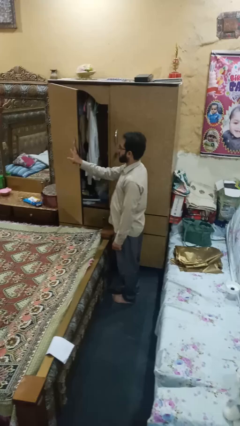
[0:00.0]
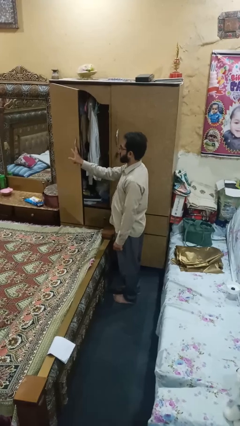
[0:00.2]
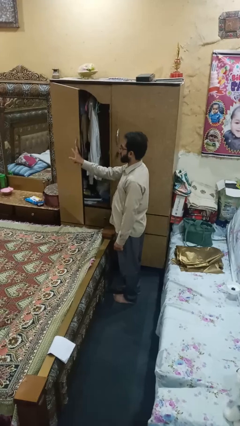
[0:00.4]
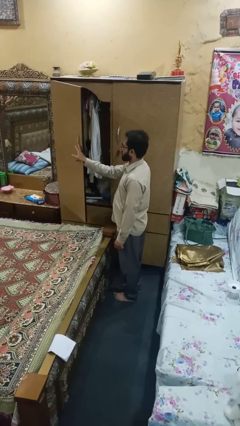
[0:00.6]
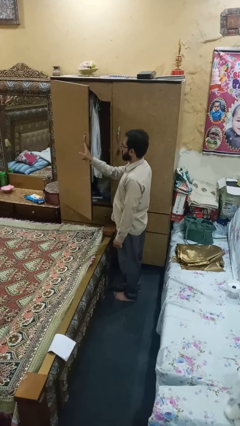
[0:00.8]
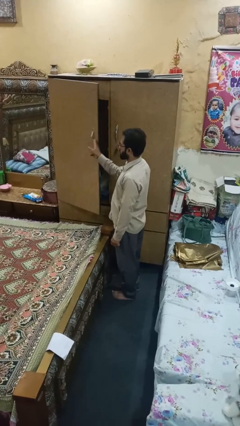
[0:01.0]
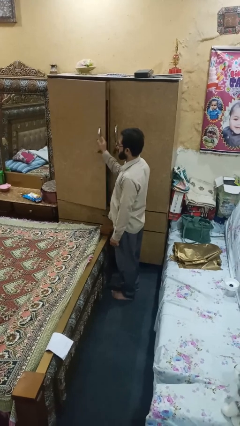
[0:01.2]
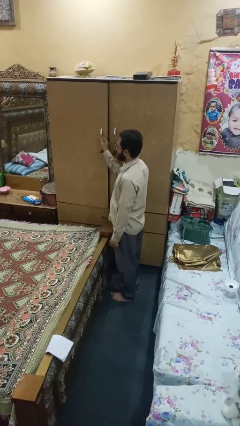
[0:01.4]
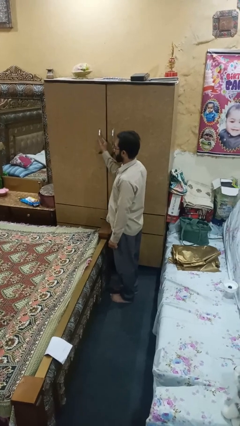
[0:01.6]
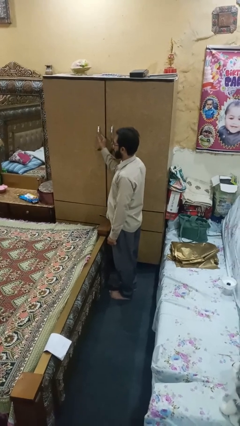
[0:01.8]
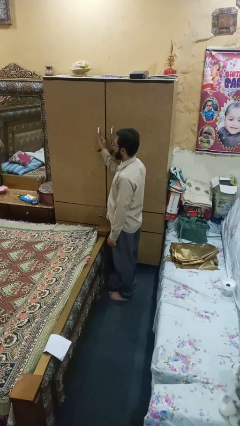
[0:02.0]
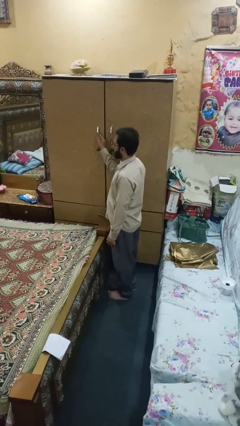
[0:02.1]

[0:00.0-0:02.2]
person closes closet door

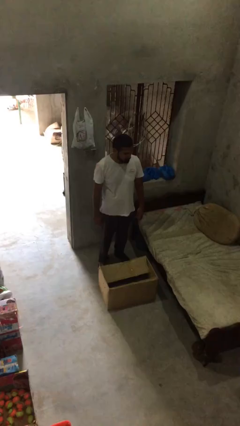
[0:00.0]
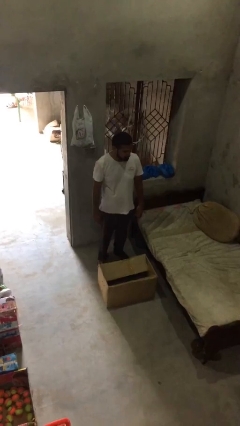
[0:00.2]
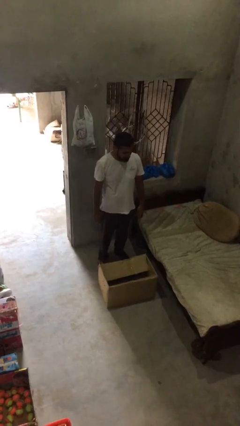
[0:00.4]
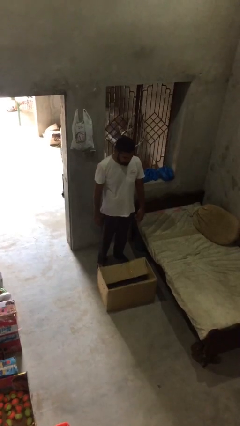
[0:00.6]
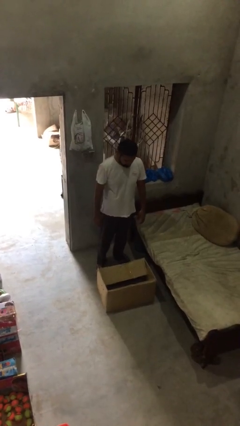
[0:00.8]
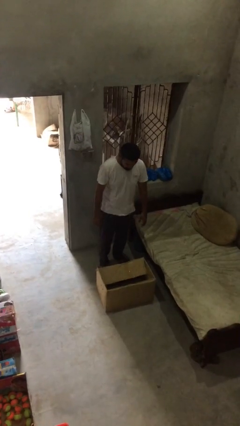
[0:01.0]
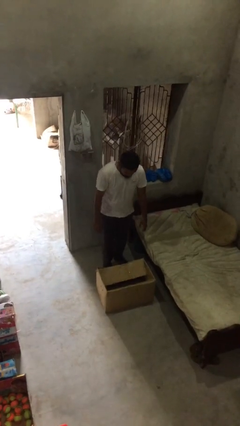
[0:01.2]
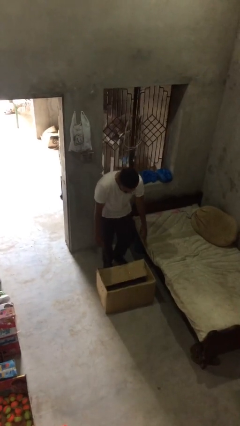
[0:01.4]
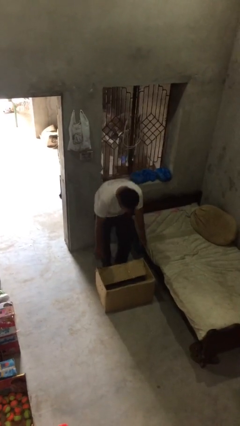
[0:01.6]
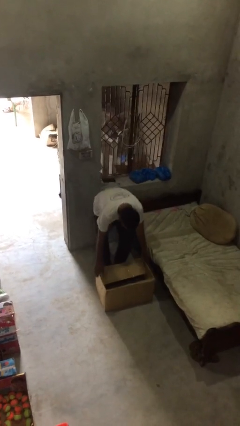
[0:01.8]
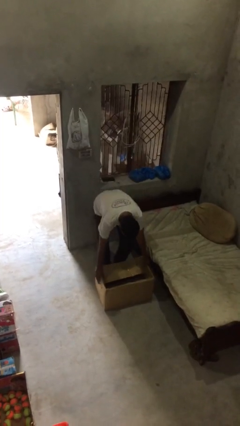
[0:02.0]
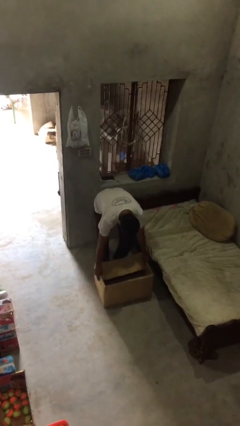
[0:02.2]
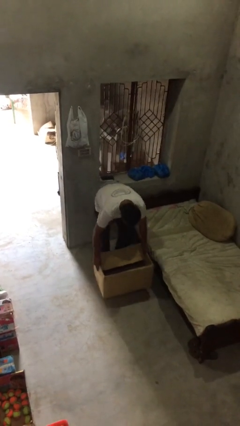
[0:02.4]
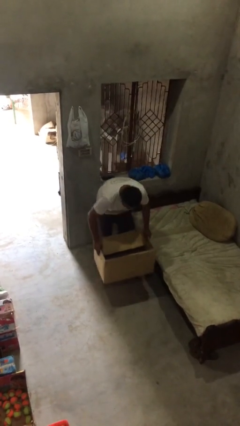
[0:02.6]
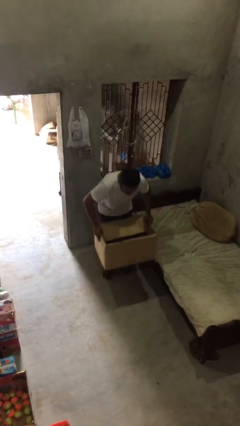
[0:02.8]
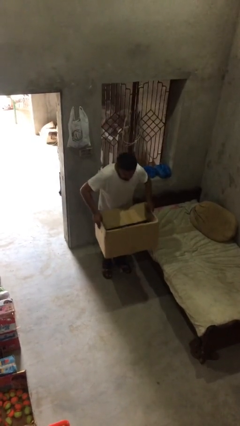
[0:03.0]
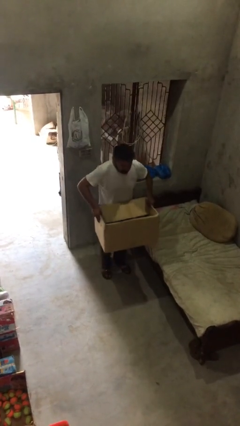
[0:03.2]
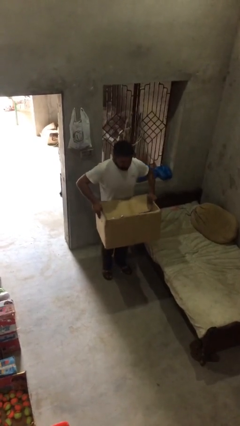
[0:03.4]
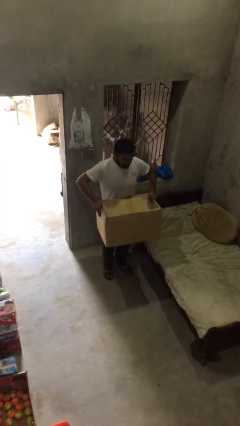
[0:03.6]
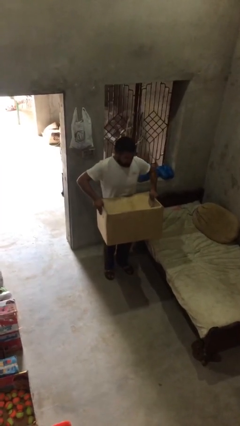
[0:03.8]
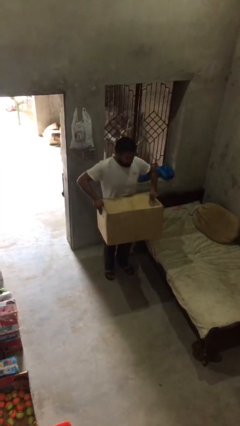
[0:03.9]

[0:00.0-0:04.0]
person picks up object from floor

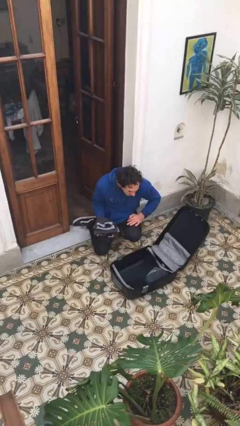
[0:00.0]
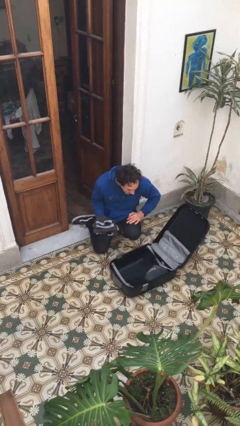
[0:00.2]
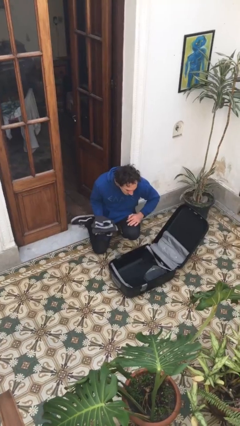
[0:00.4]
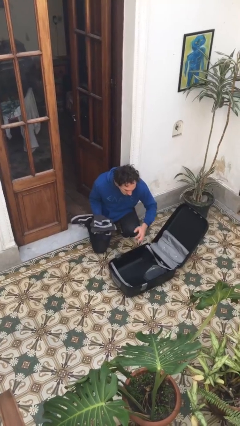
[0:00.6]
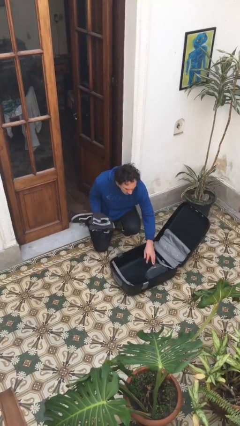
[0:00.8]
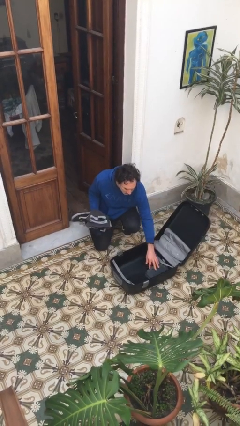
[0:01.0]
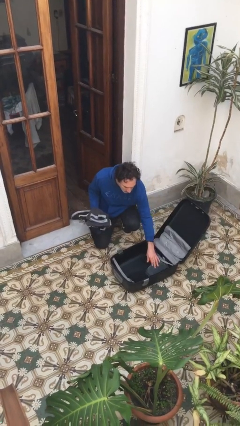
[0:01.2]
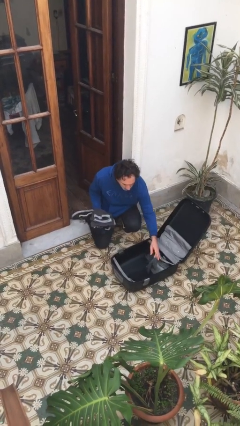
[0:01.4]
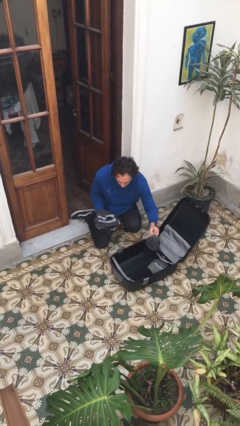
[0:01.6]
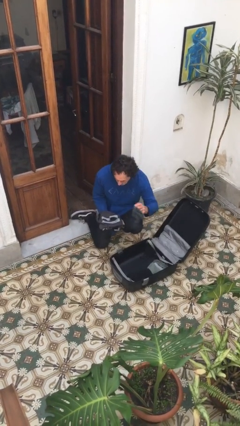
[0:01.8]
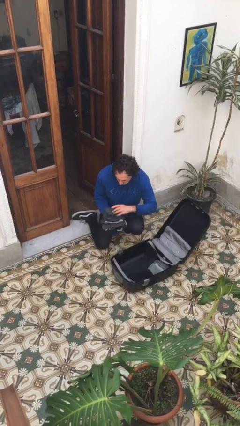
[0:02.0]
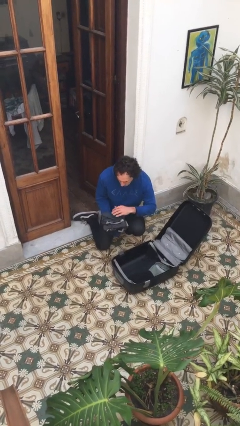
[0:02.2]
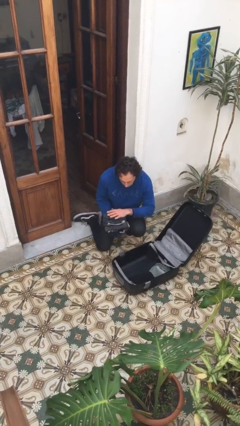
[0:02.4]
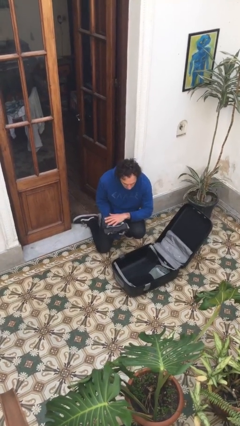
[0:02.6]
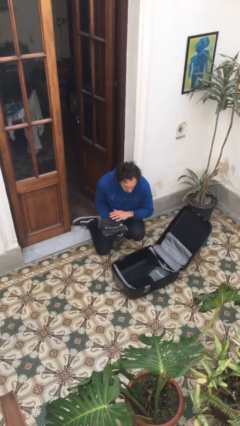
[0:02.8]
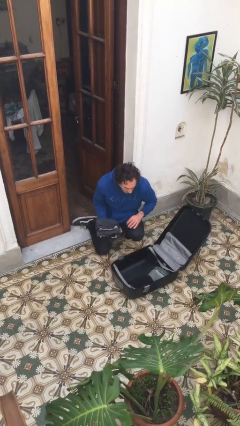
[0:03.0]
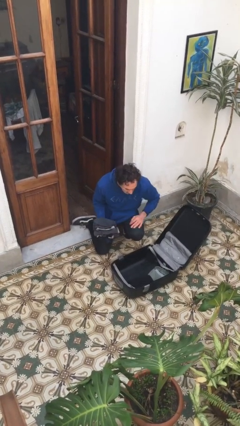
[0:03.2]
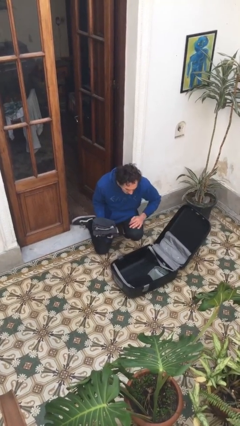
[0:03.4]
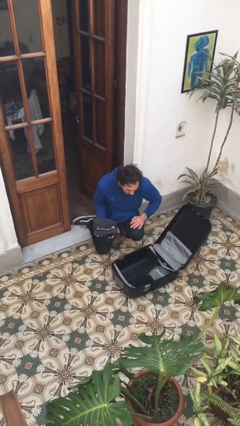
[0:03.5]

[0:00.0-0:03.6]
person unloads clothes from suitcase

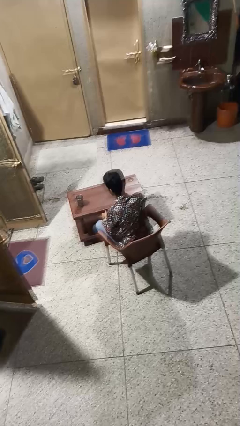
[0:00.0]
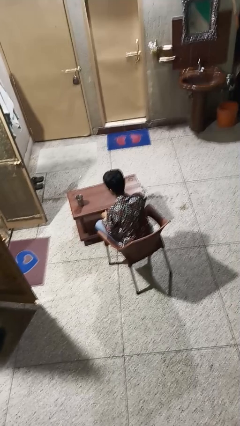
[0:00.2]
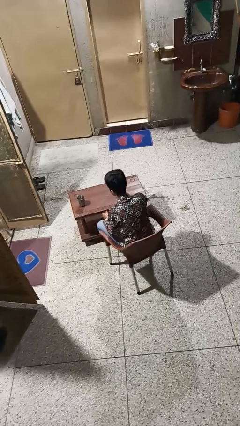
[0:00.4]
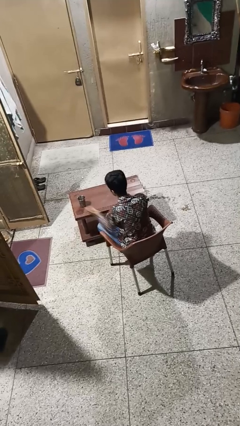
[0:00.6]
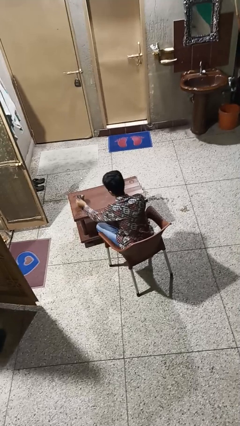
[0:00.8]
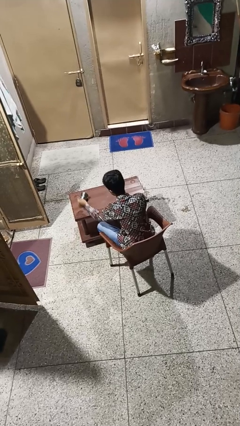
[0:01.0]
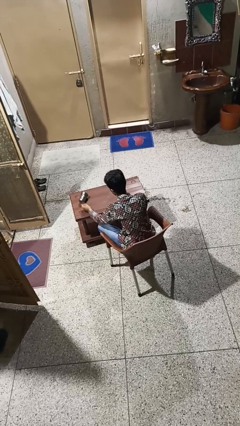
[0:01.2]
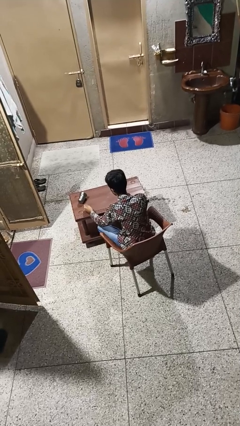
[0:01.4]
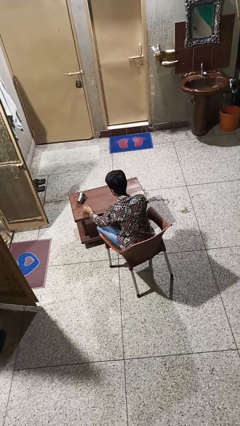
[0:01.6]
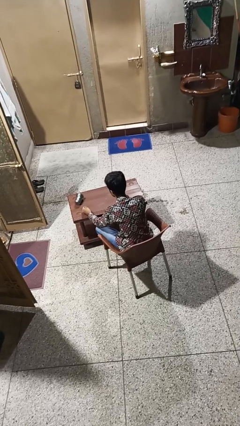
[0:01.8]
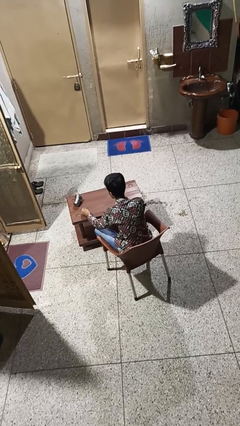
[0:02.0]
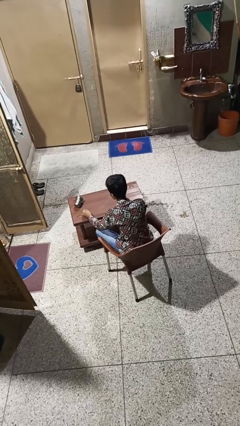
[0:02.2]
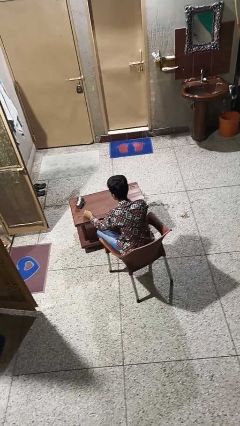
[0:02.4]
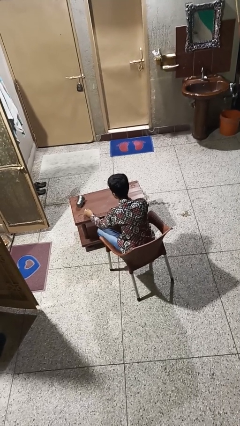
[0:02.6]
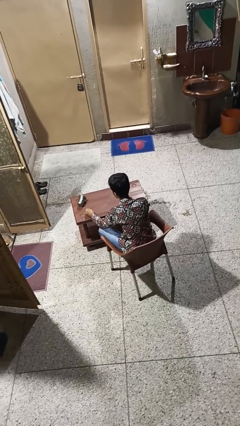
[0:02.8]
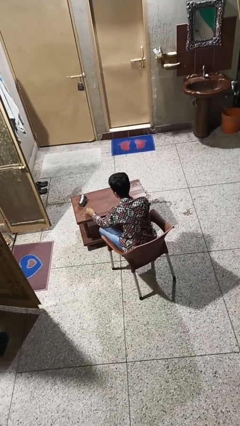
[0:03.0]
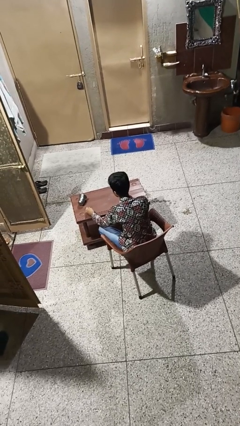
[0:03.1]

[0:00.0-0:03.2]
person knocks over glass

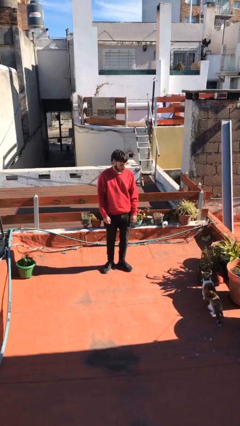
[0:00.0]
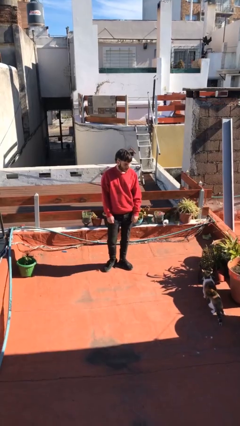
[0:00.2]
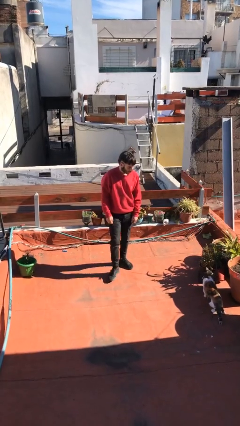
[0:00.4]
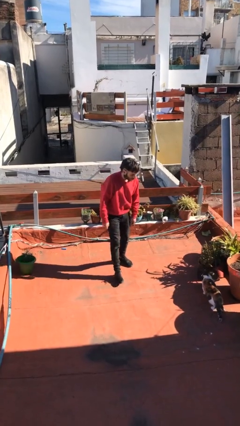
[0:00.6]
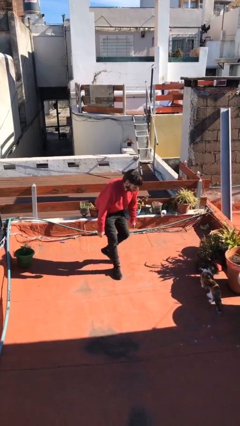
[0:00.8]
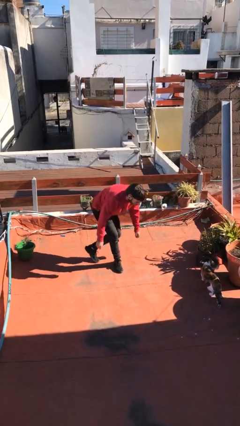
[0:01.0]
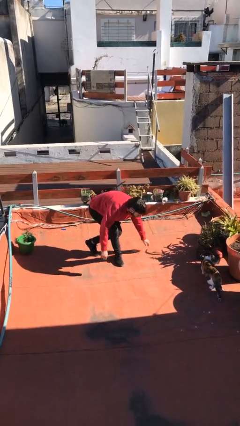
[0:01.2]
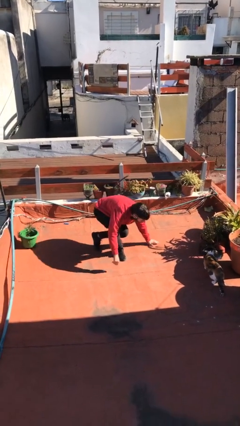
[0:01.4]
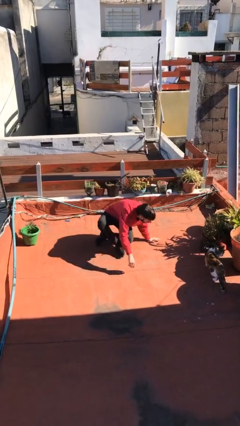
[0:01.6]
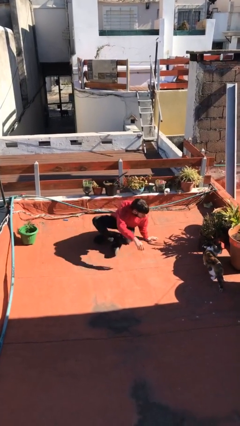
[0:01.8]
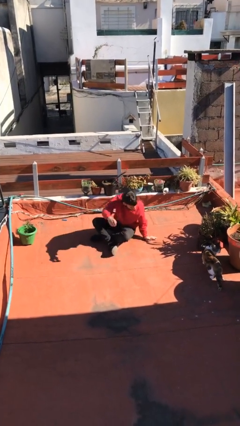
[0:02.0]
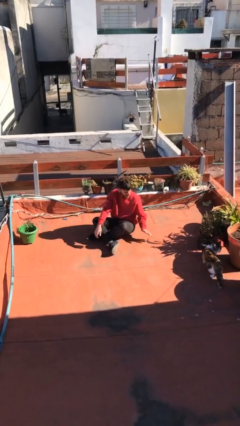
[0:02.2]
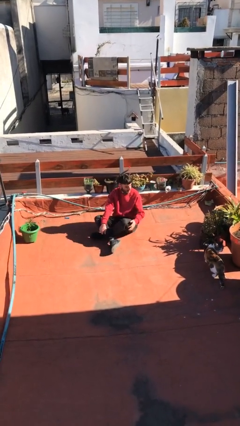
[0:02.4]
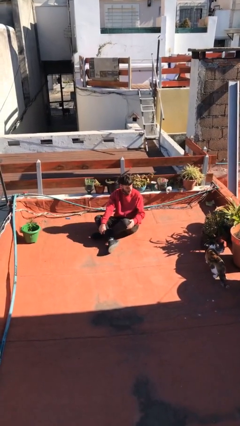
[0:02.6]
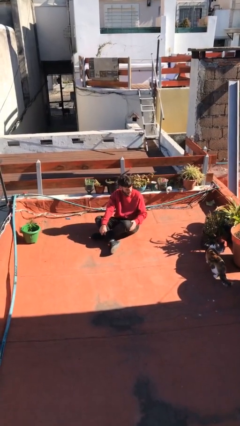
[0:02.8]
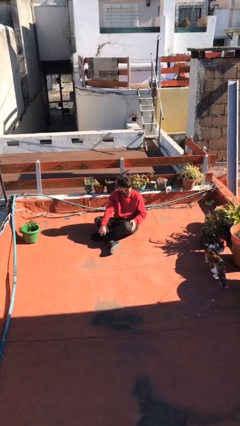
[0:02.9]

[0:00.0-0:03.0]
person sits crisscross

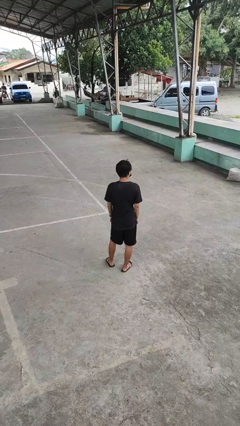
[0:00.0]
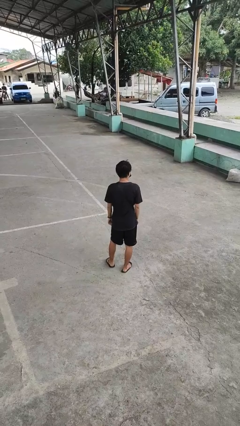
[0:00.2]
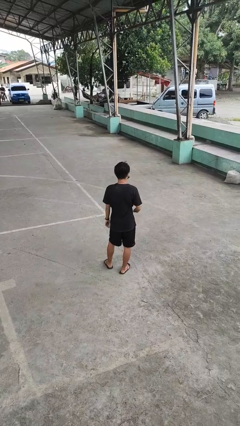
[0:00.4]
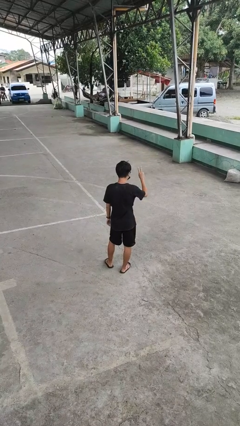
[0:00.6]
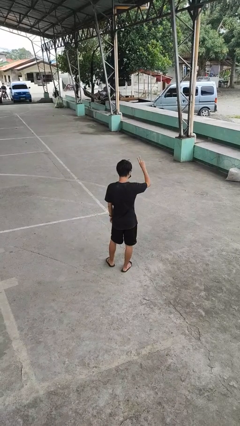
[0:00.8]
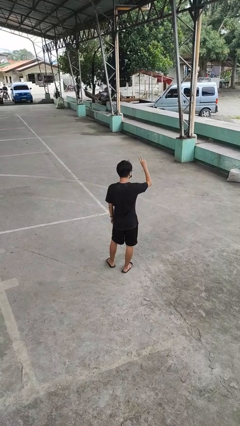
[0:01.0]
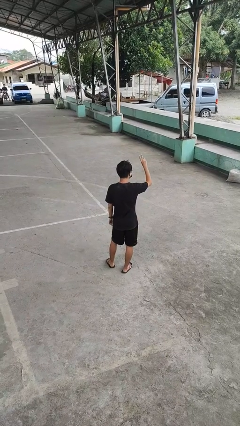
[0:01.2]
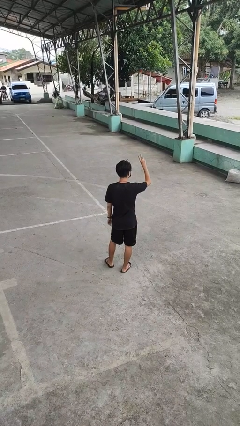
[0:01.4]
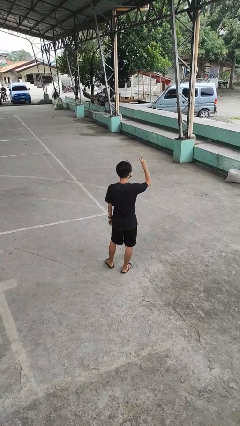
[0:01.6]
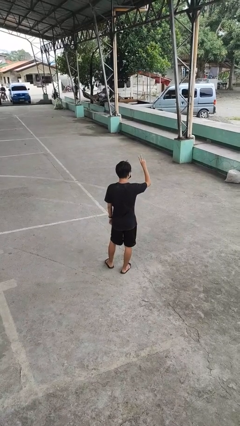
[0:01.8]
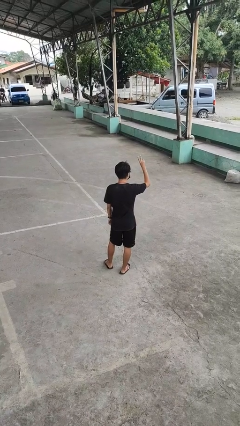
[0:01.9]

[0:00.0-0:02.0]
person gestures peace
